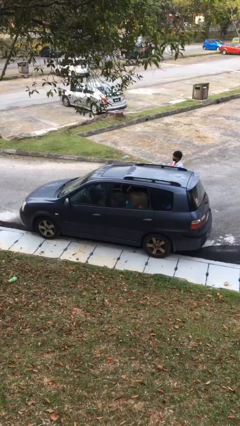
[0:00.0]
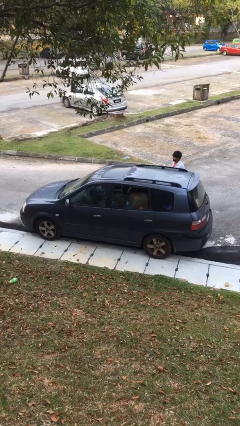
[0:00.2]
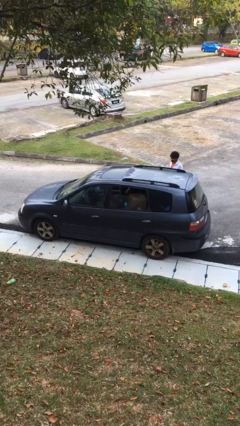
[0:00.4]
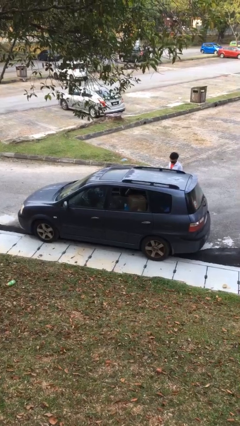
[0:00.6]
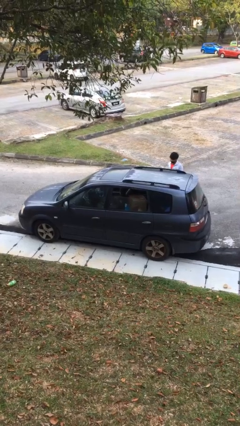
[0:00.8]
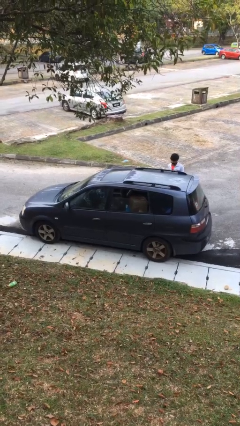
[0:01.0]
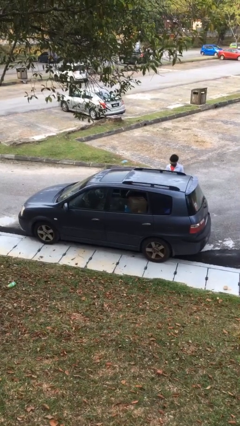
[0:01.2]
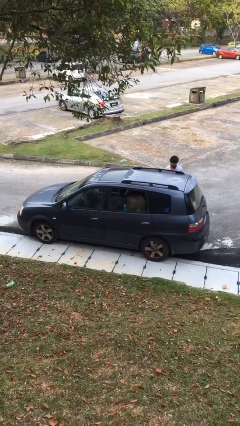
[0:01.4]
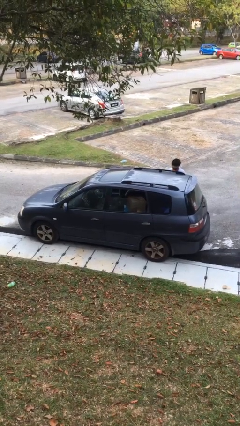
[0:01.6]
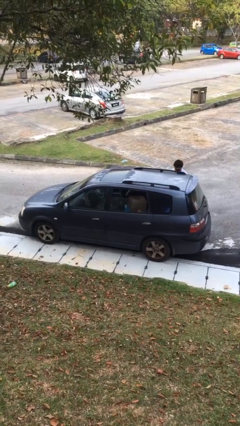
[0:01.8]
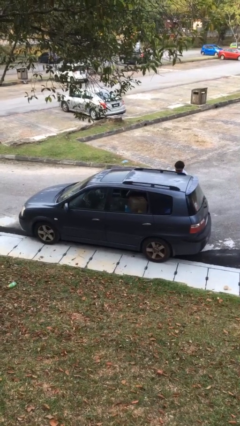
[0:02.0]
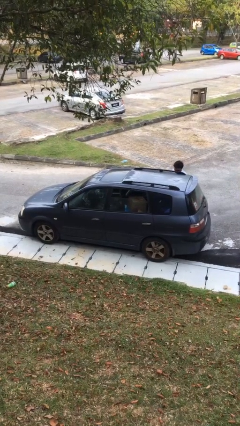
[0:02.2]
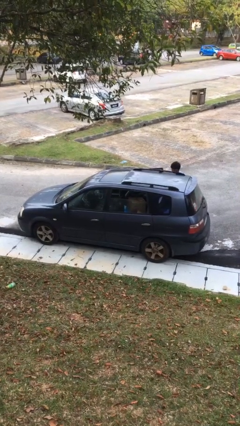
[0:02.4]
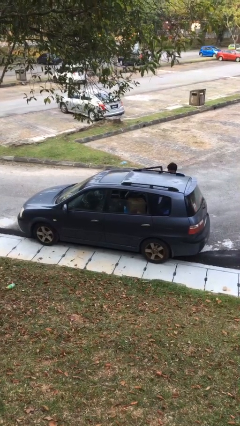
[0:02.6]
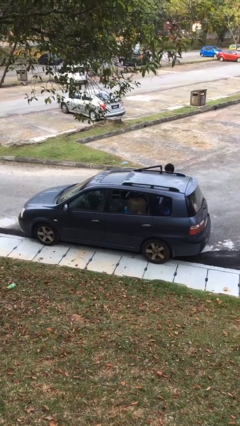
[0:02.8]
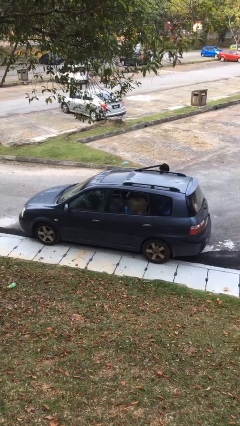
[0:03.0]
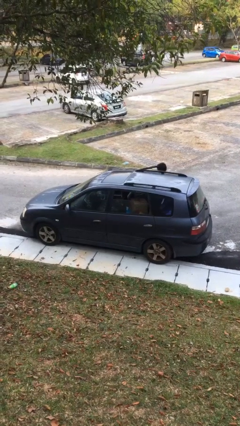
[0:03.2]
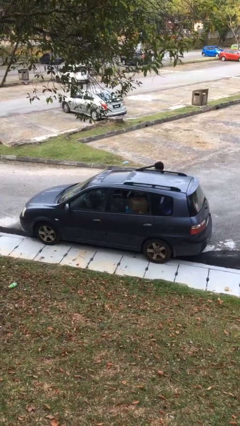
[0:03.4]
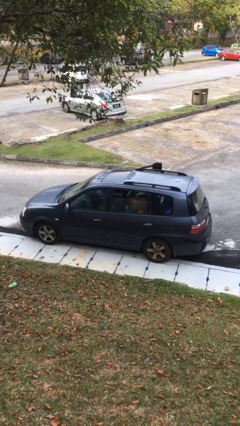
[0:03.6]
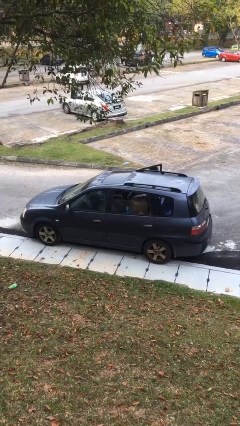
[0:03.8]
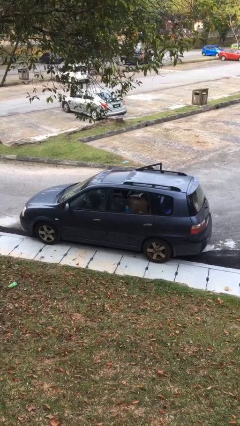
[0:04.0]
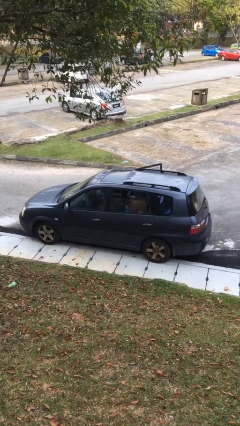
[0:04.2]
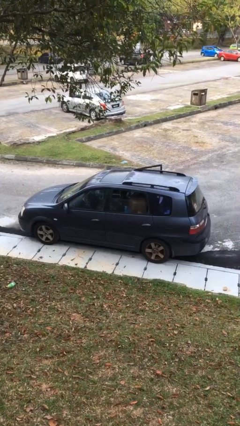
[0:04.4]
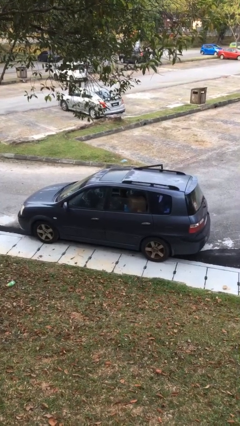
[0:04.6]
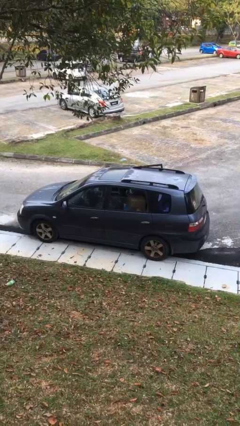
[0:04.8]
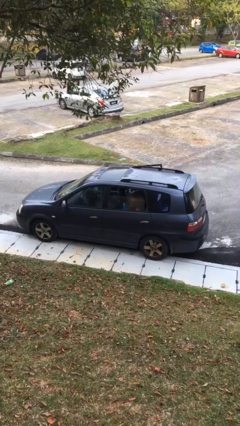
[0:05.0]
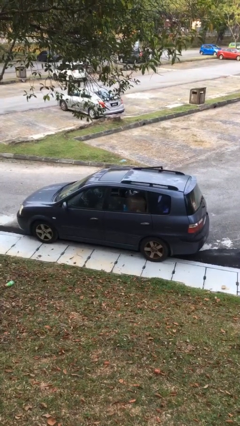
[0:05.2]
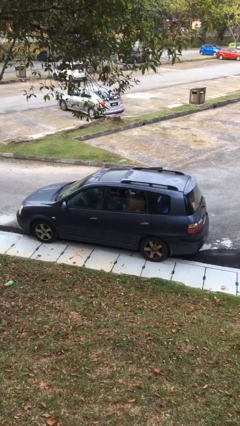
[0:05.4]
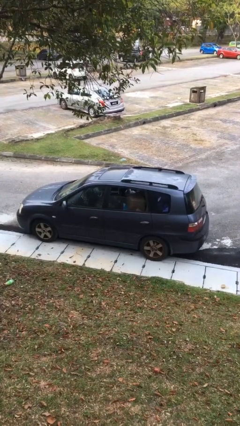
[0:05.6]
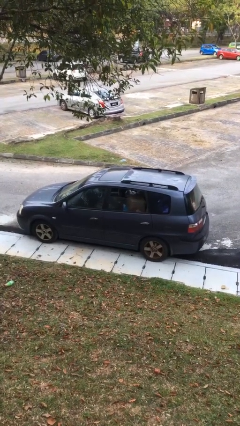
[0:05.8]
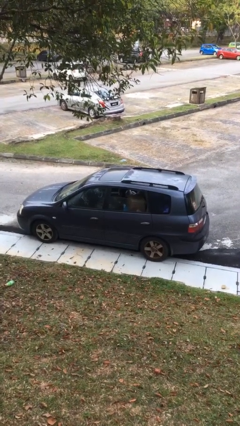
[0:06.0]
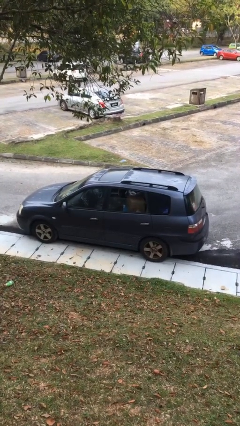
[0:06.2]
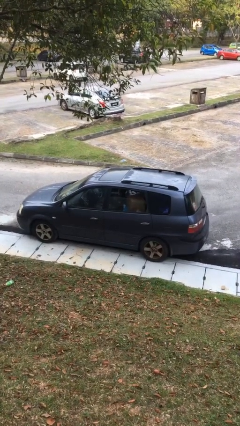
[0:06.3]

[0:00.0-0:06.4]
car picks up person

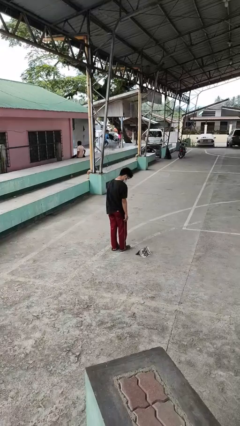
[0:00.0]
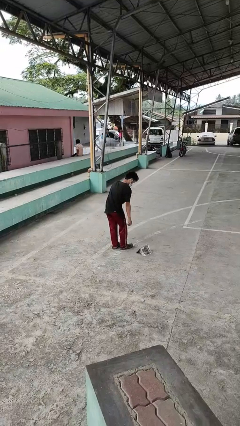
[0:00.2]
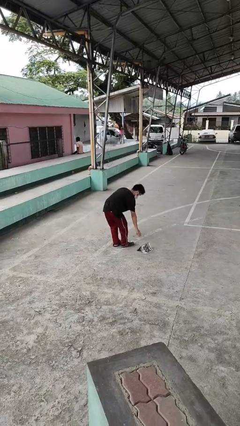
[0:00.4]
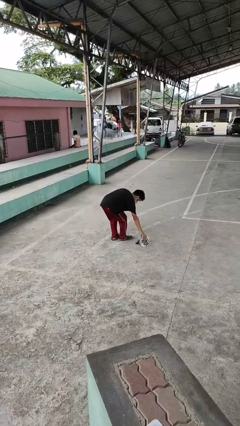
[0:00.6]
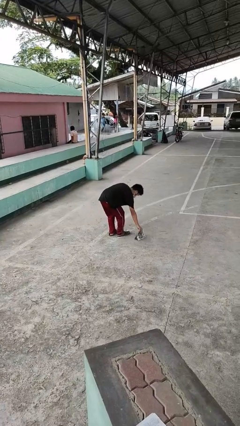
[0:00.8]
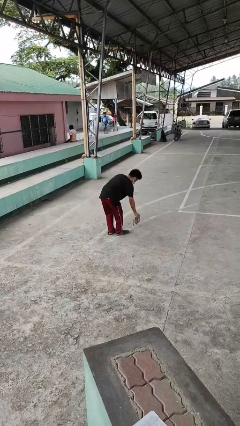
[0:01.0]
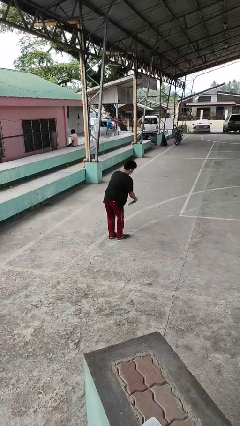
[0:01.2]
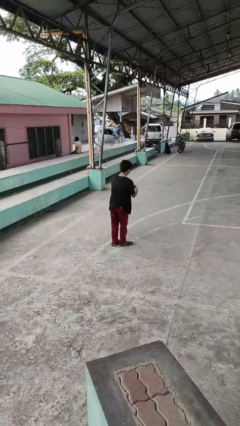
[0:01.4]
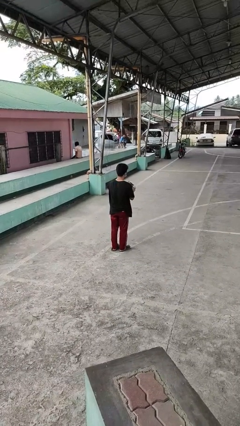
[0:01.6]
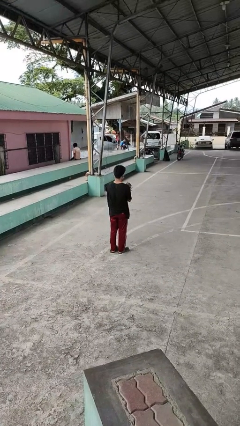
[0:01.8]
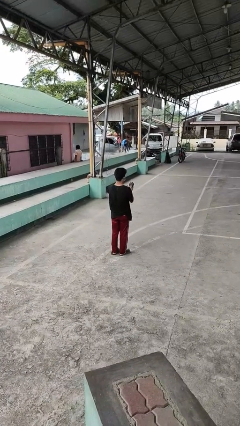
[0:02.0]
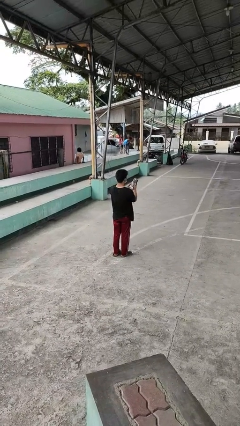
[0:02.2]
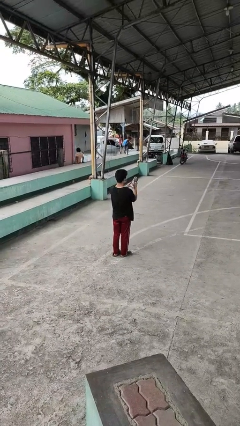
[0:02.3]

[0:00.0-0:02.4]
person picks up object from floor

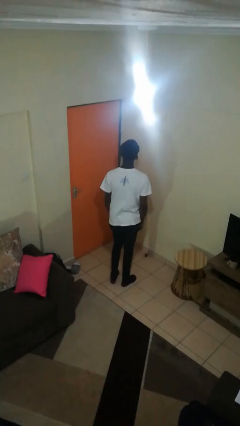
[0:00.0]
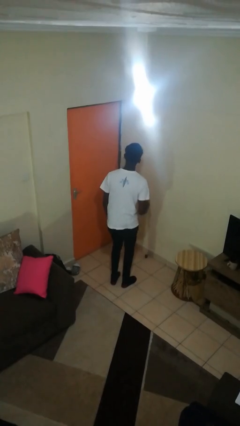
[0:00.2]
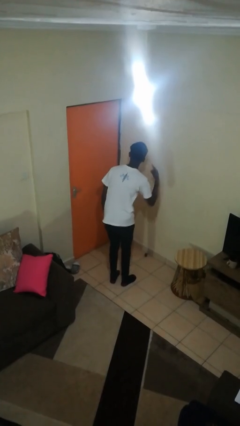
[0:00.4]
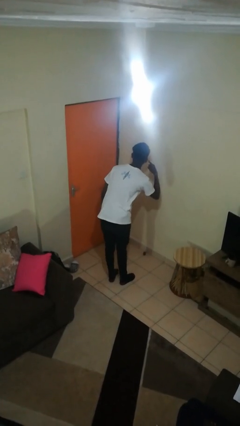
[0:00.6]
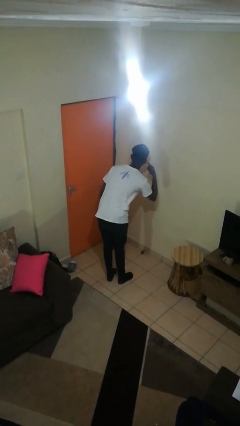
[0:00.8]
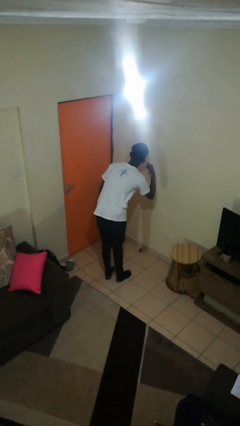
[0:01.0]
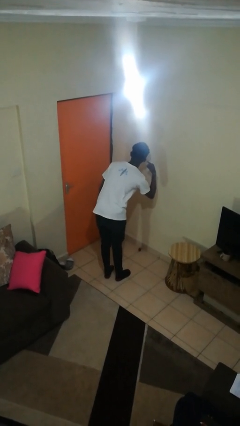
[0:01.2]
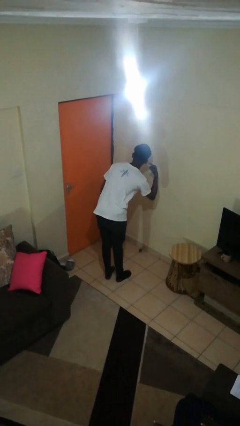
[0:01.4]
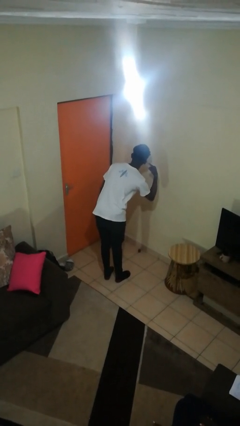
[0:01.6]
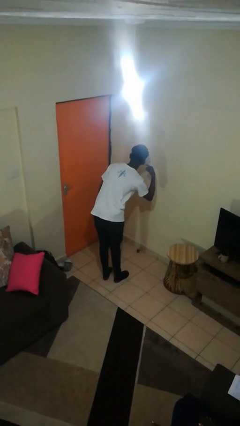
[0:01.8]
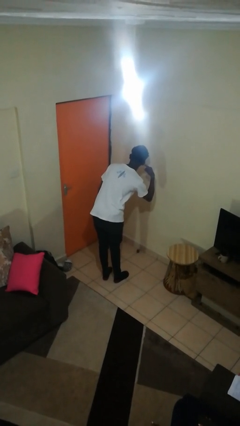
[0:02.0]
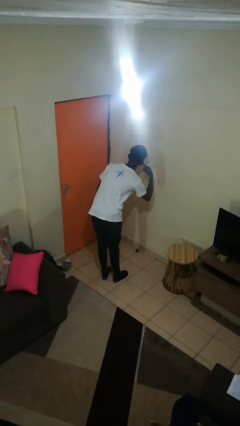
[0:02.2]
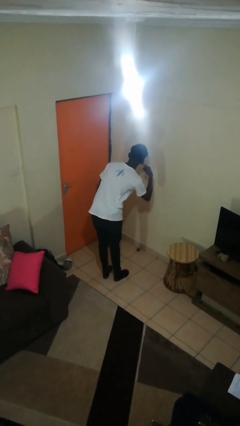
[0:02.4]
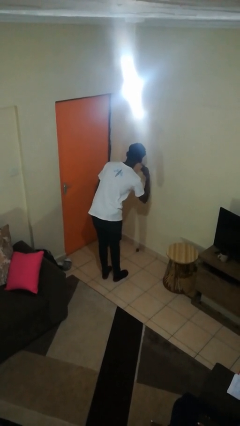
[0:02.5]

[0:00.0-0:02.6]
person gestures listen closely

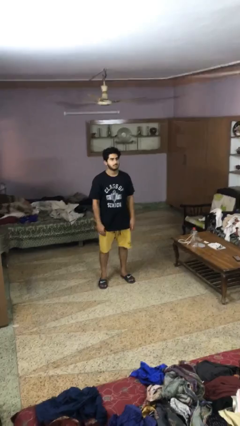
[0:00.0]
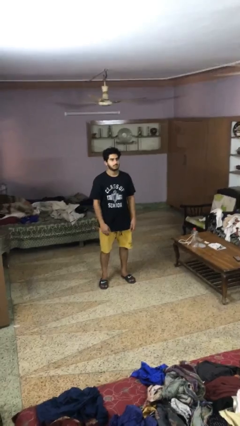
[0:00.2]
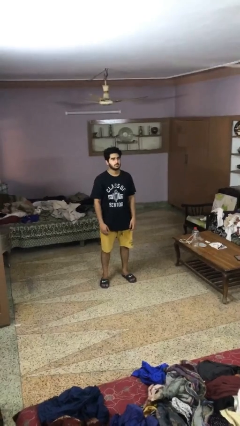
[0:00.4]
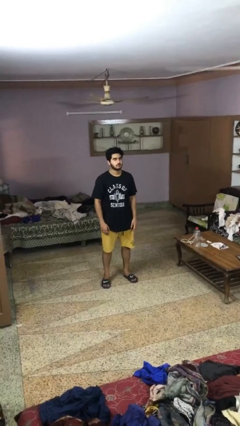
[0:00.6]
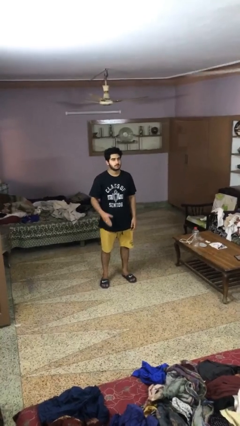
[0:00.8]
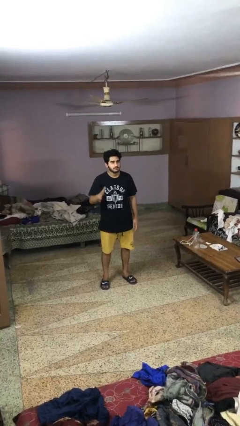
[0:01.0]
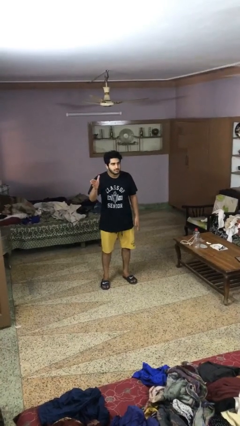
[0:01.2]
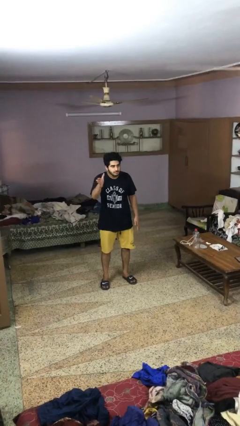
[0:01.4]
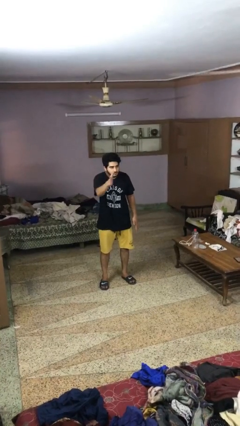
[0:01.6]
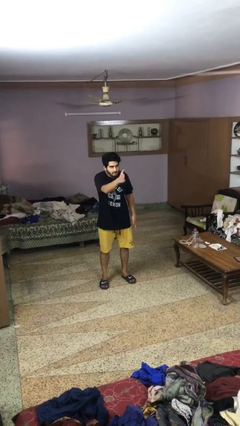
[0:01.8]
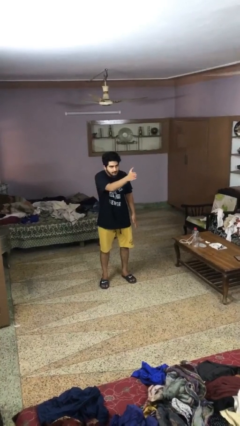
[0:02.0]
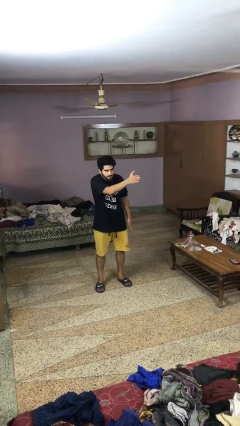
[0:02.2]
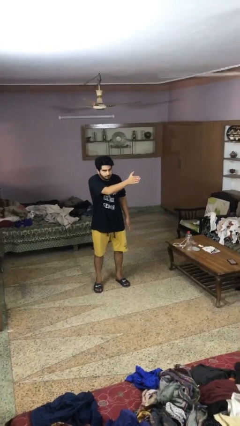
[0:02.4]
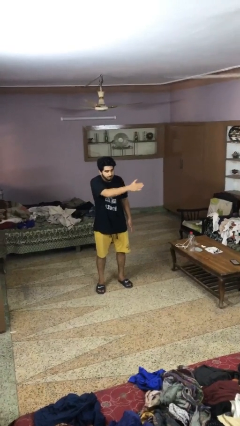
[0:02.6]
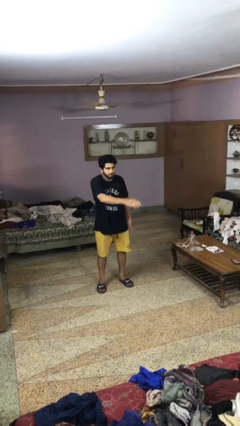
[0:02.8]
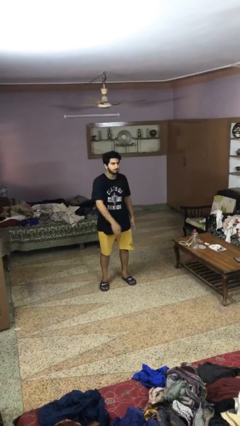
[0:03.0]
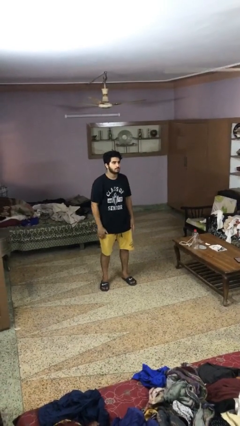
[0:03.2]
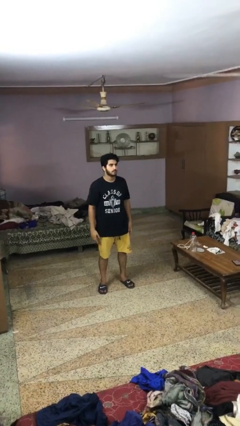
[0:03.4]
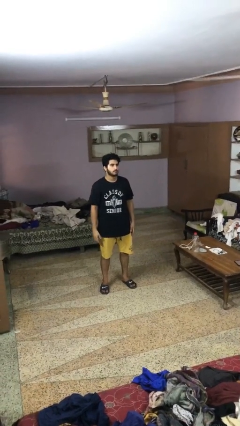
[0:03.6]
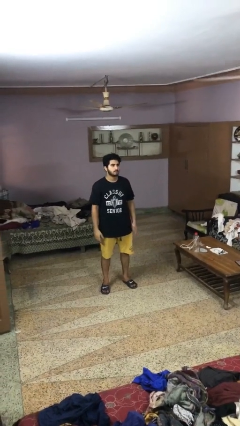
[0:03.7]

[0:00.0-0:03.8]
person gestures swipe left

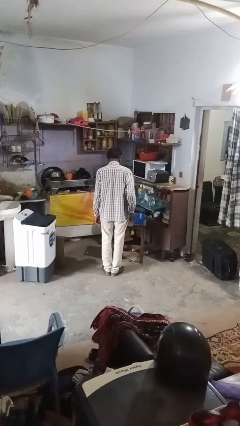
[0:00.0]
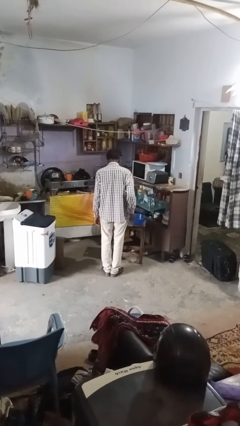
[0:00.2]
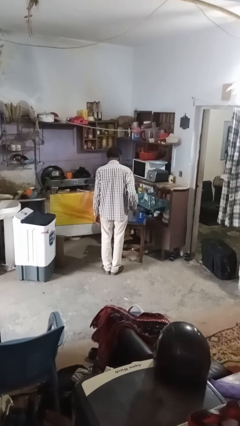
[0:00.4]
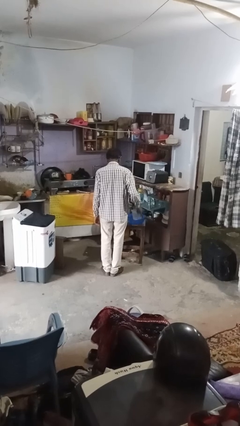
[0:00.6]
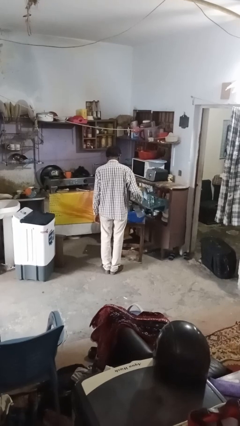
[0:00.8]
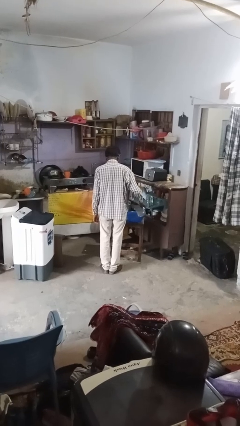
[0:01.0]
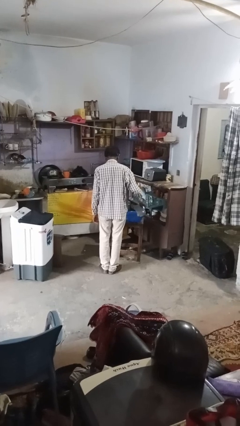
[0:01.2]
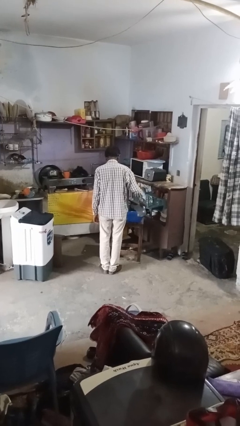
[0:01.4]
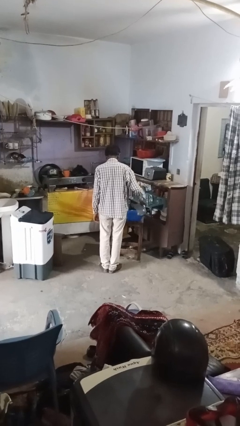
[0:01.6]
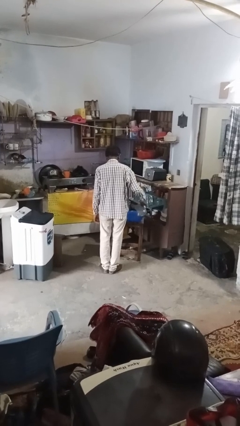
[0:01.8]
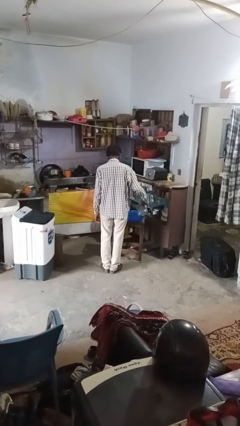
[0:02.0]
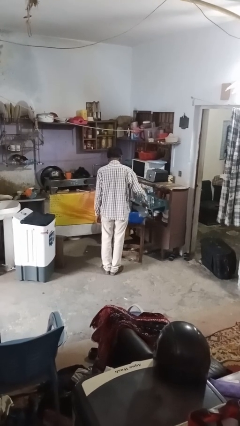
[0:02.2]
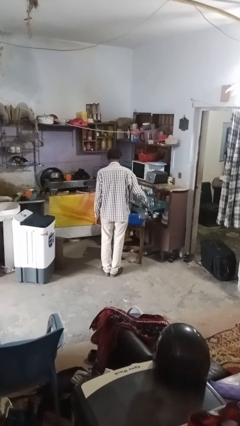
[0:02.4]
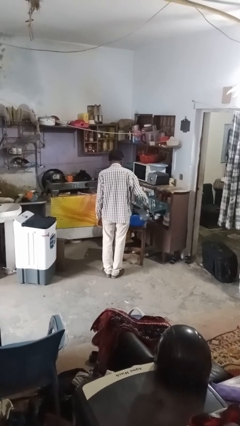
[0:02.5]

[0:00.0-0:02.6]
person pours into bowl
